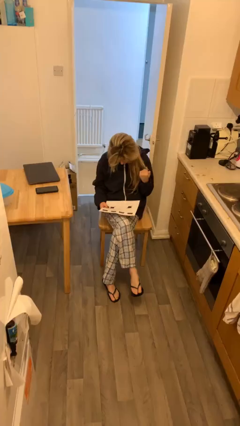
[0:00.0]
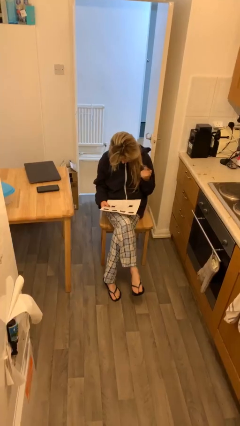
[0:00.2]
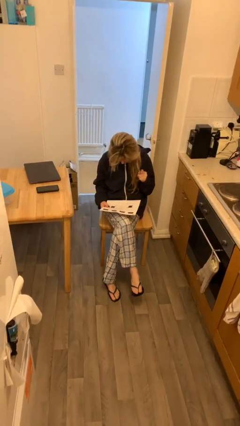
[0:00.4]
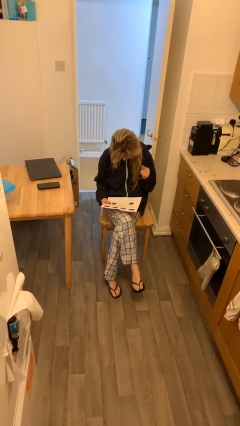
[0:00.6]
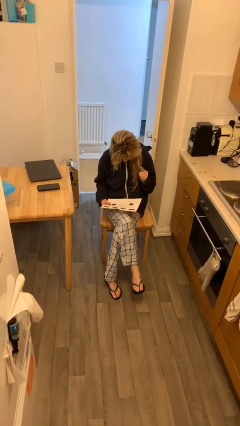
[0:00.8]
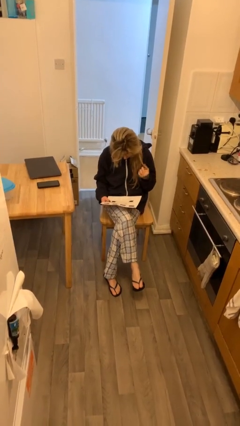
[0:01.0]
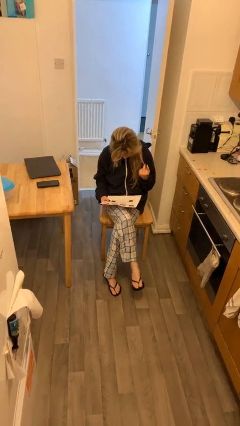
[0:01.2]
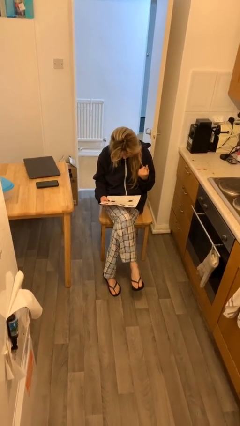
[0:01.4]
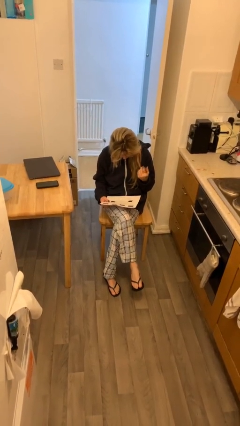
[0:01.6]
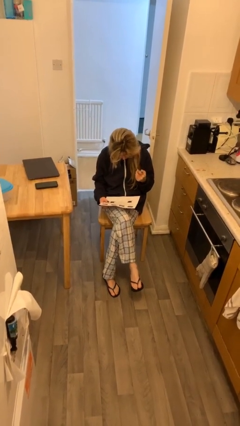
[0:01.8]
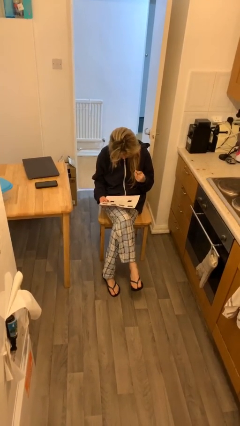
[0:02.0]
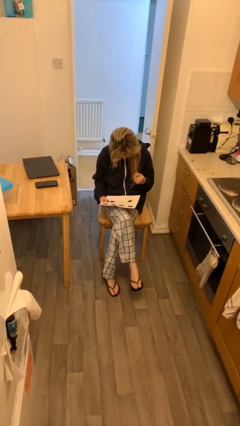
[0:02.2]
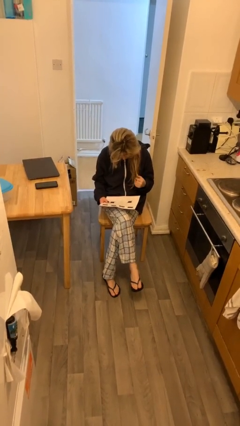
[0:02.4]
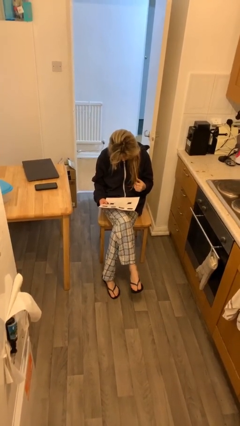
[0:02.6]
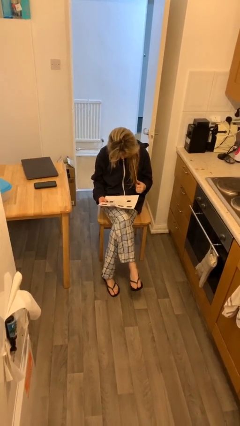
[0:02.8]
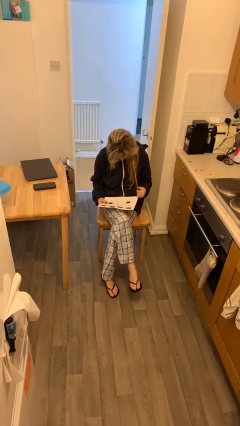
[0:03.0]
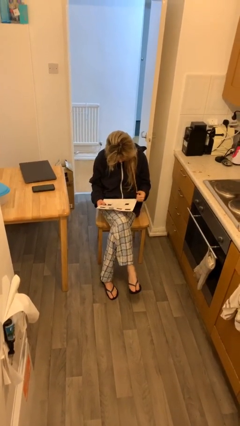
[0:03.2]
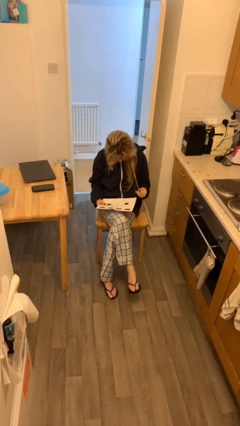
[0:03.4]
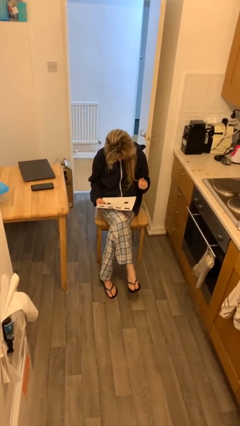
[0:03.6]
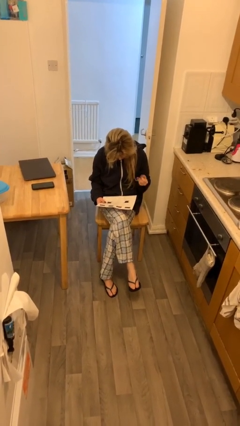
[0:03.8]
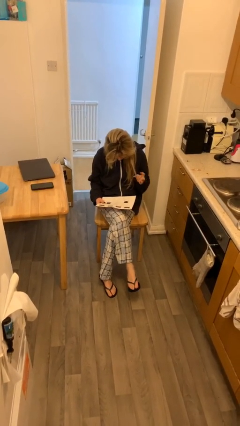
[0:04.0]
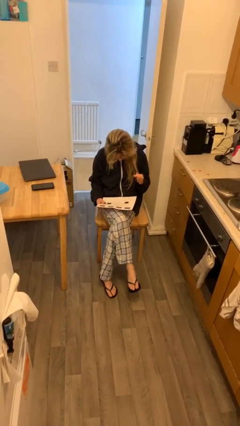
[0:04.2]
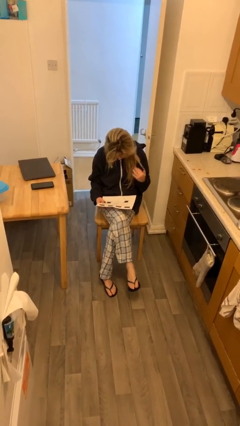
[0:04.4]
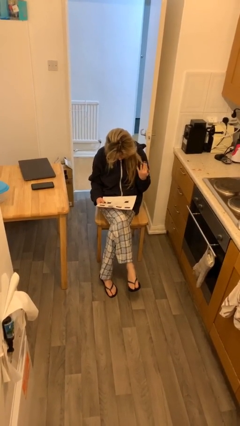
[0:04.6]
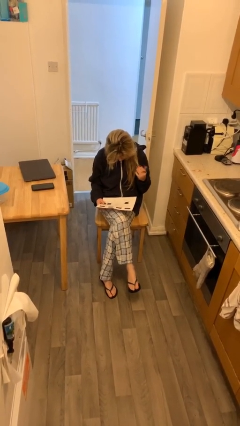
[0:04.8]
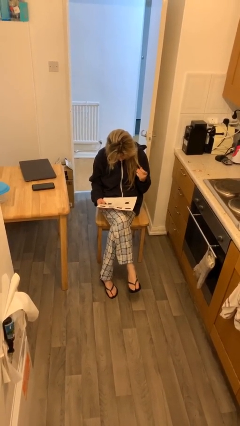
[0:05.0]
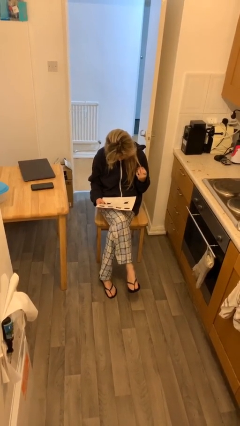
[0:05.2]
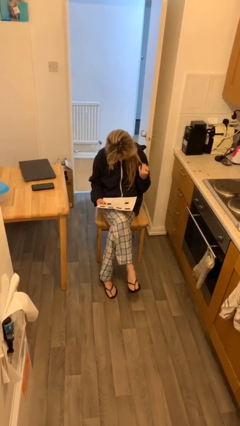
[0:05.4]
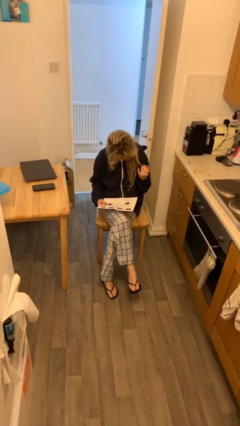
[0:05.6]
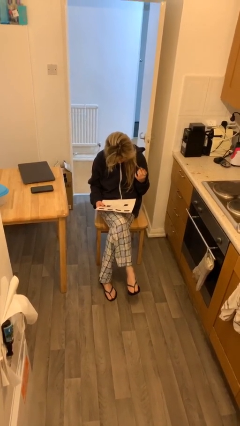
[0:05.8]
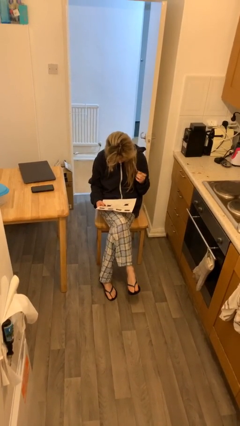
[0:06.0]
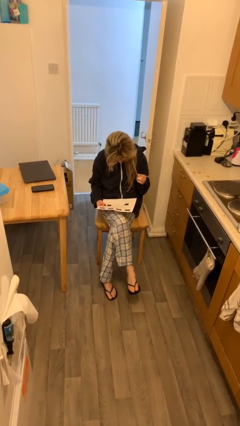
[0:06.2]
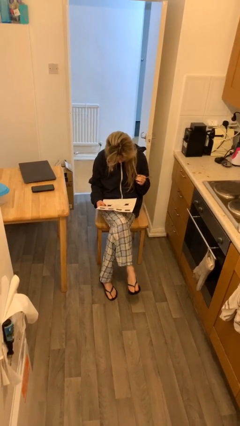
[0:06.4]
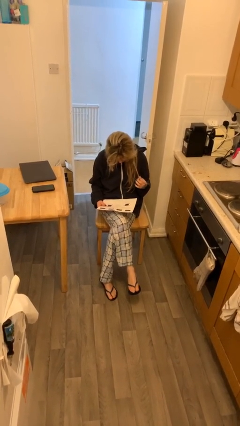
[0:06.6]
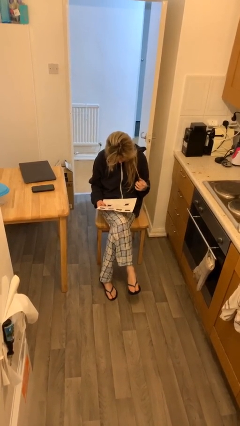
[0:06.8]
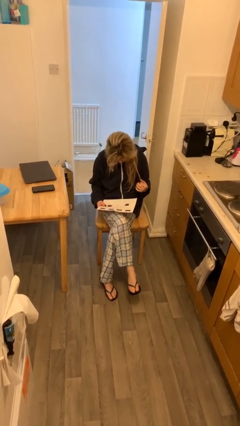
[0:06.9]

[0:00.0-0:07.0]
person reads document

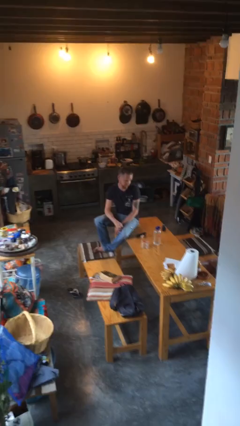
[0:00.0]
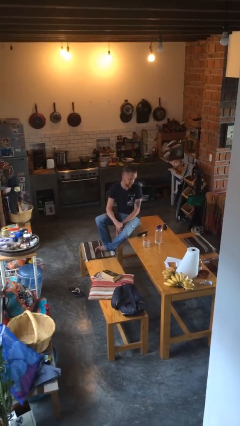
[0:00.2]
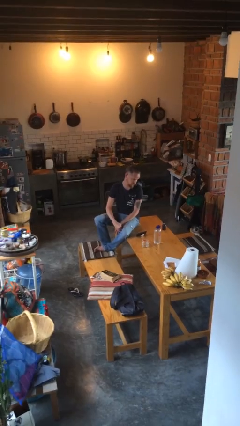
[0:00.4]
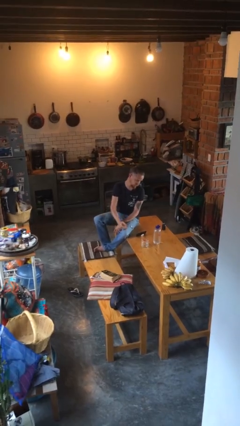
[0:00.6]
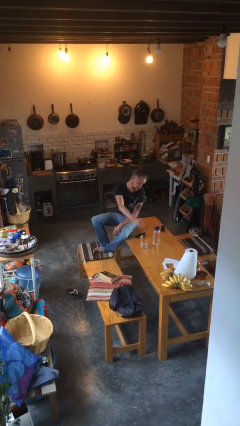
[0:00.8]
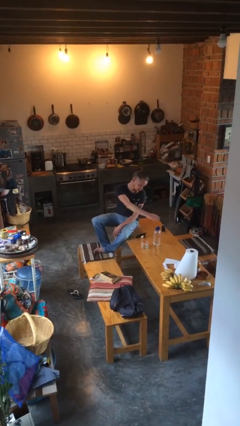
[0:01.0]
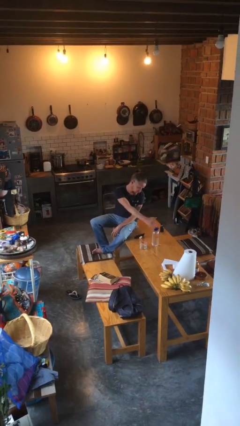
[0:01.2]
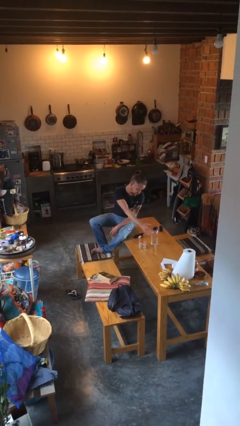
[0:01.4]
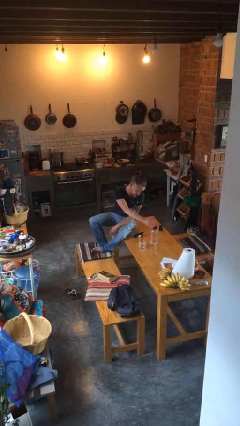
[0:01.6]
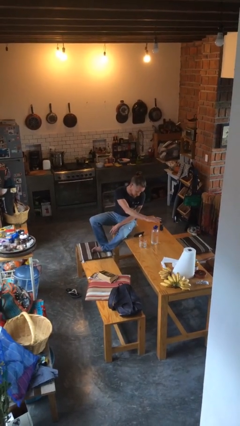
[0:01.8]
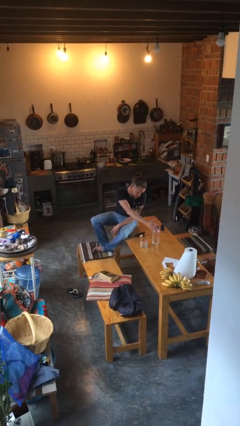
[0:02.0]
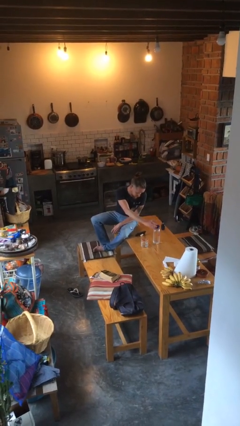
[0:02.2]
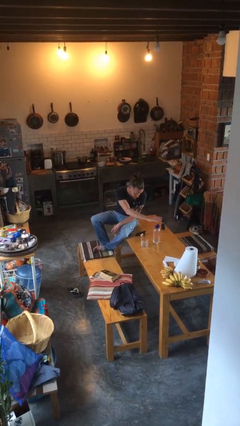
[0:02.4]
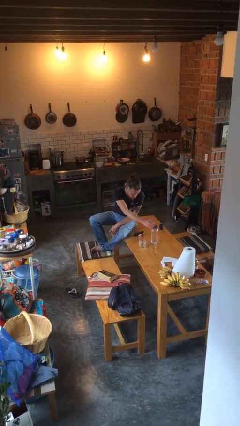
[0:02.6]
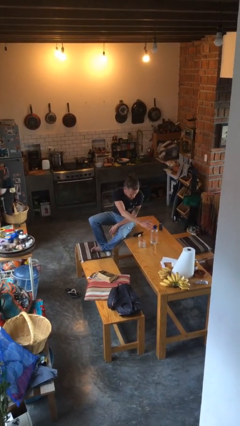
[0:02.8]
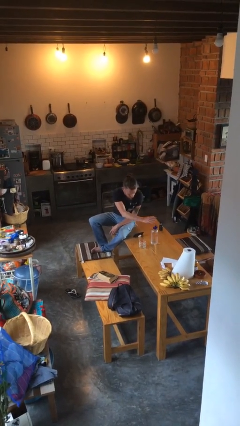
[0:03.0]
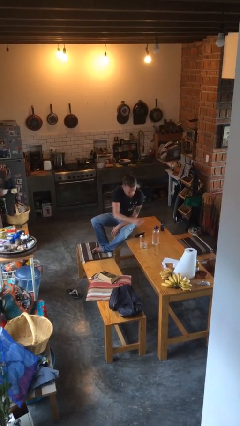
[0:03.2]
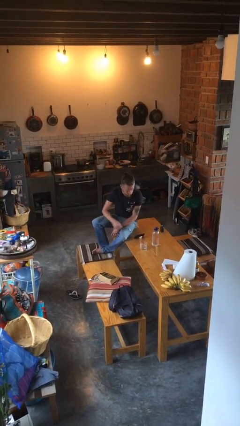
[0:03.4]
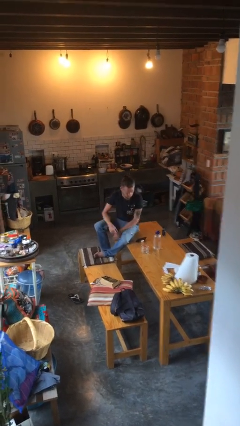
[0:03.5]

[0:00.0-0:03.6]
person waves hand over object

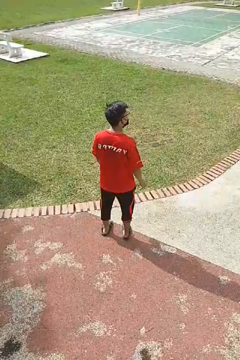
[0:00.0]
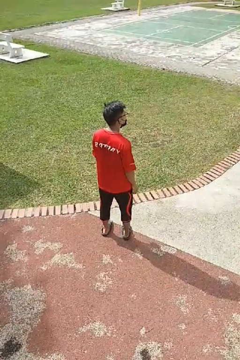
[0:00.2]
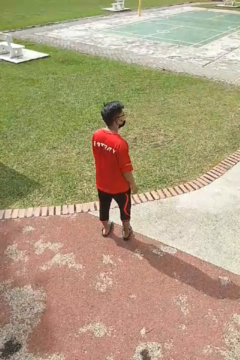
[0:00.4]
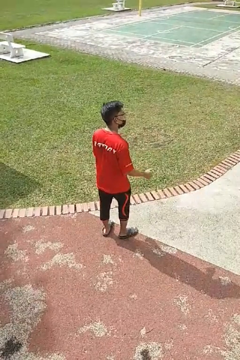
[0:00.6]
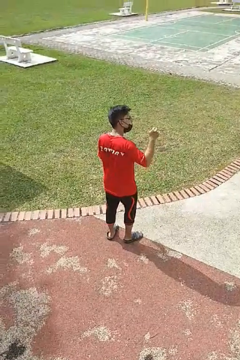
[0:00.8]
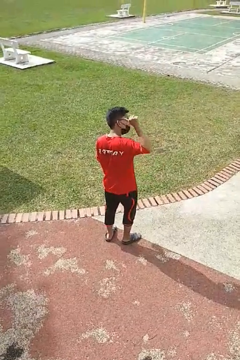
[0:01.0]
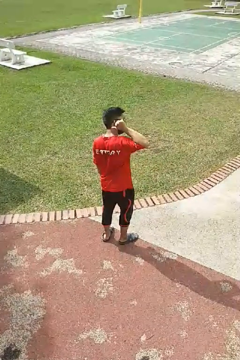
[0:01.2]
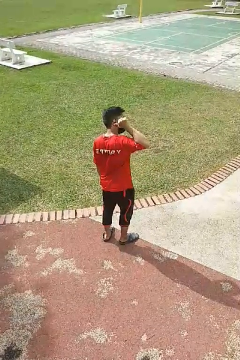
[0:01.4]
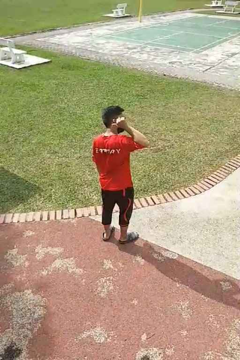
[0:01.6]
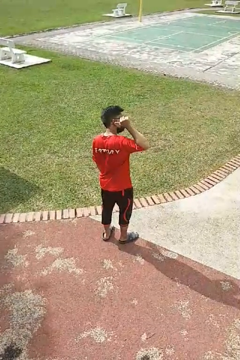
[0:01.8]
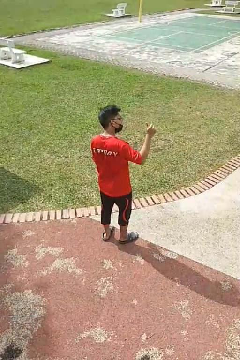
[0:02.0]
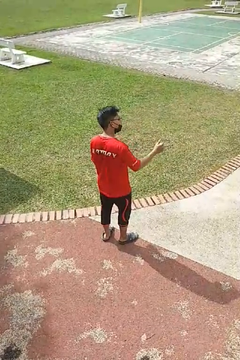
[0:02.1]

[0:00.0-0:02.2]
person gestures behind me

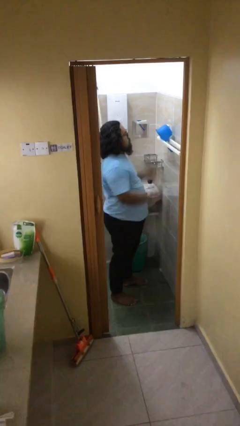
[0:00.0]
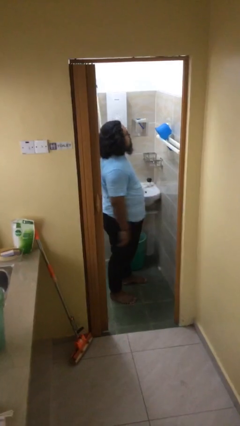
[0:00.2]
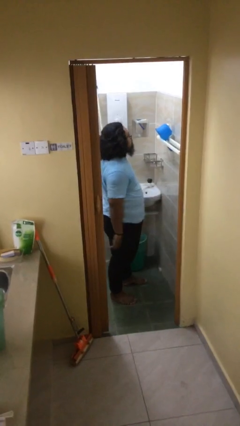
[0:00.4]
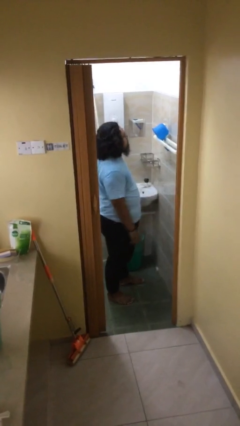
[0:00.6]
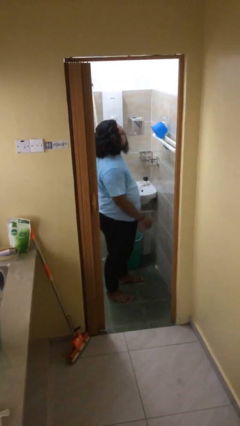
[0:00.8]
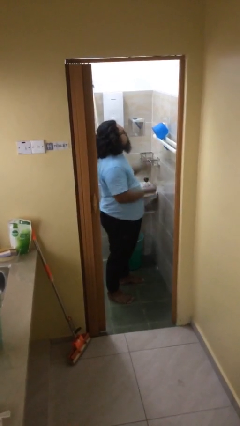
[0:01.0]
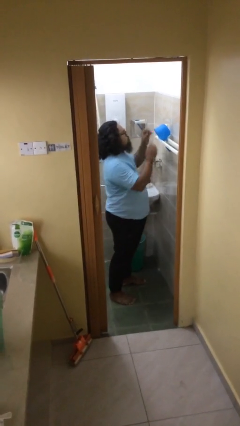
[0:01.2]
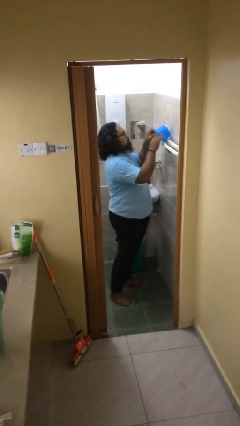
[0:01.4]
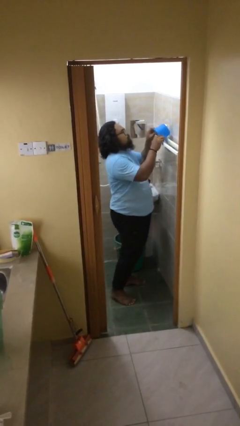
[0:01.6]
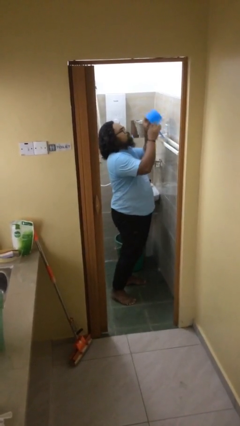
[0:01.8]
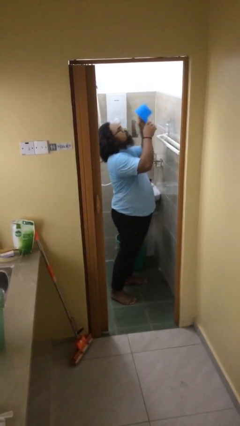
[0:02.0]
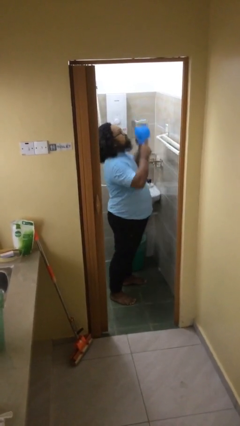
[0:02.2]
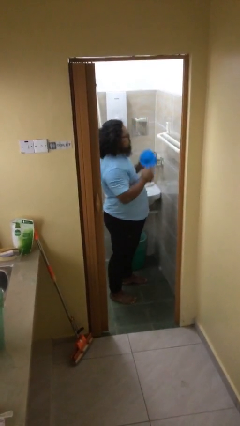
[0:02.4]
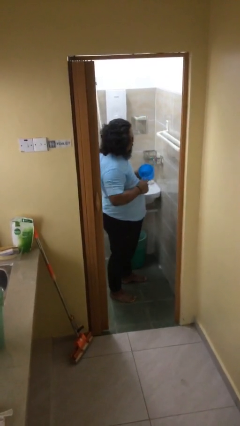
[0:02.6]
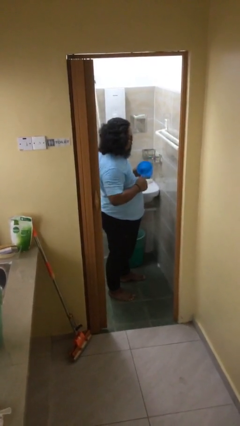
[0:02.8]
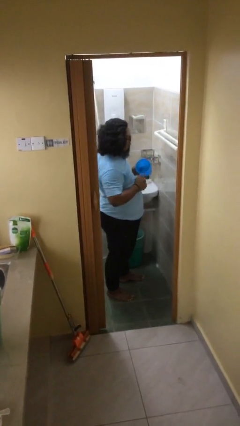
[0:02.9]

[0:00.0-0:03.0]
person picks up object from countertop

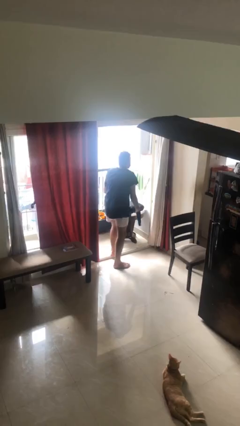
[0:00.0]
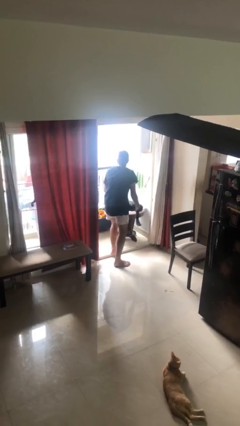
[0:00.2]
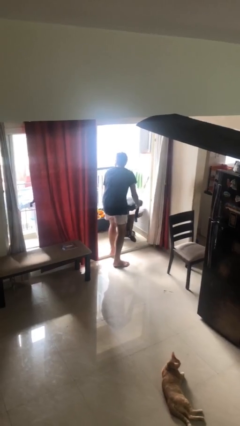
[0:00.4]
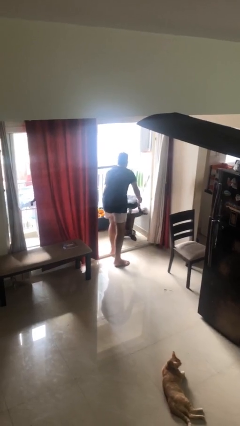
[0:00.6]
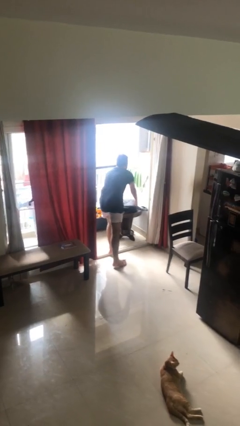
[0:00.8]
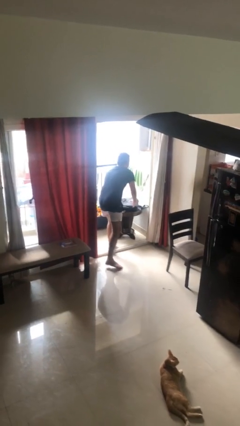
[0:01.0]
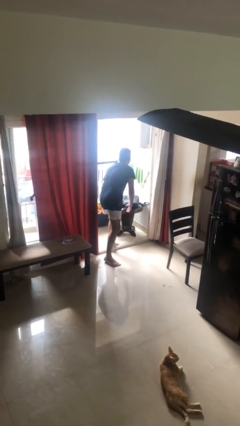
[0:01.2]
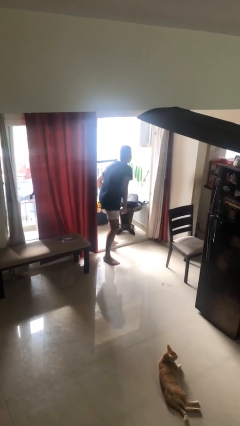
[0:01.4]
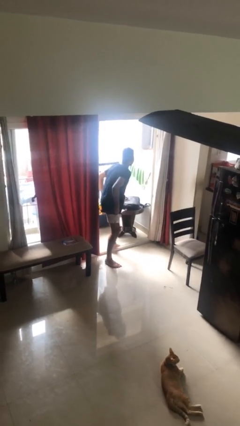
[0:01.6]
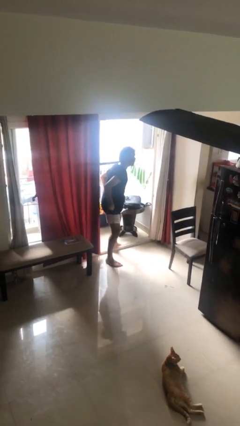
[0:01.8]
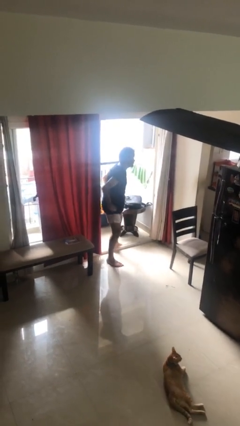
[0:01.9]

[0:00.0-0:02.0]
person puts down object on table
